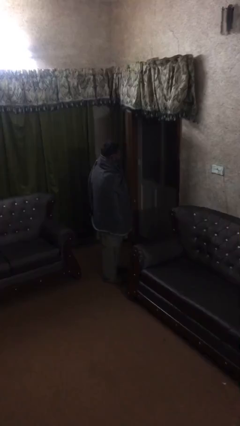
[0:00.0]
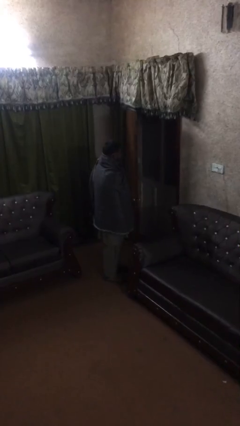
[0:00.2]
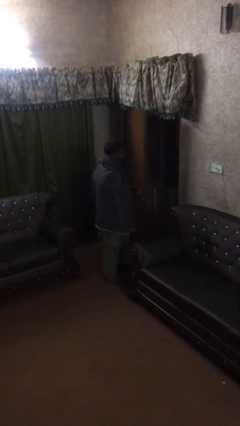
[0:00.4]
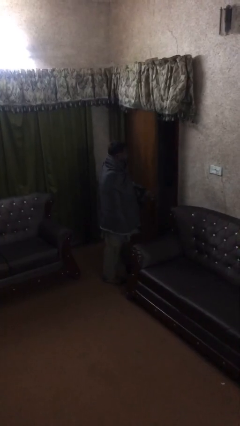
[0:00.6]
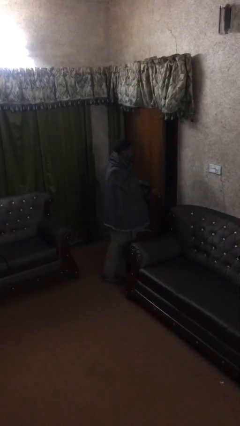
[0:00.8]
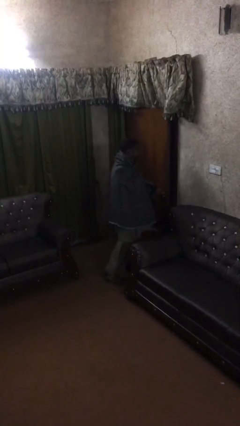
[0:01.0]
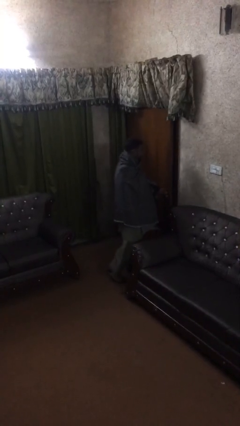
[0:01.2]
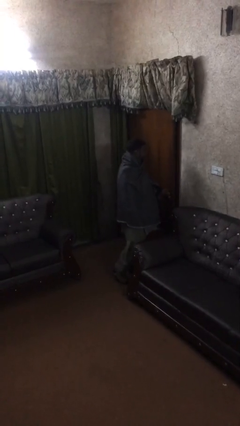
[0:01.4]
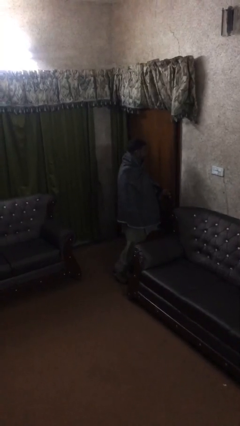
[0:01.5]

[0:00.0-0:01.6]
person closes facility door

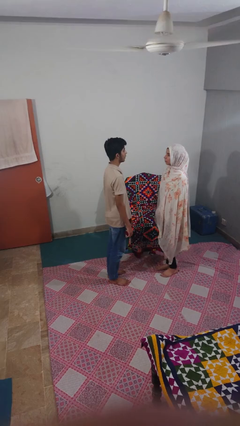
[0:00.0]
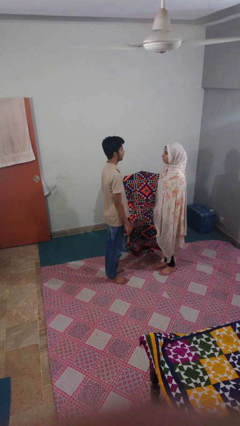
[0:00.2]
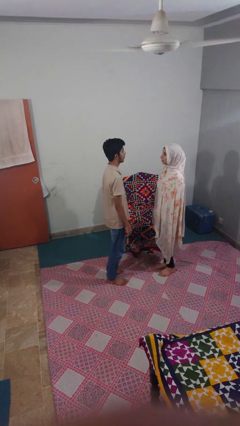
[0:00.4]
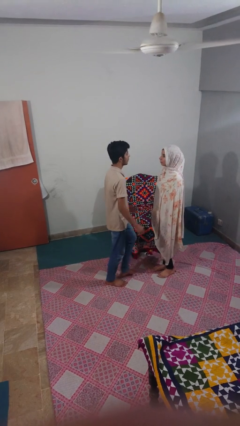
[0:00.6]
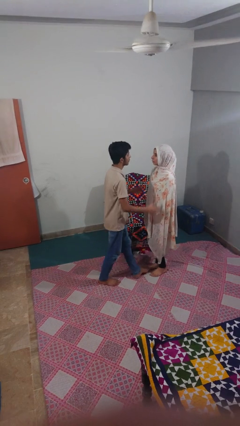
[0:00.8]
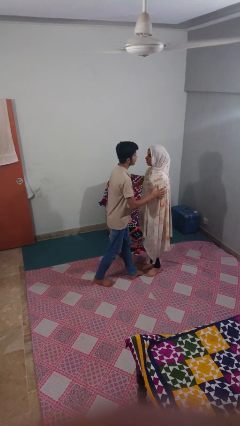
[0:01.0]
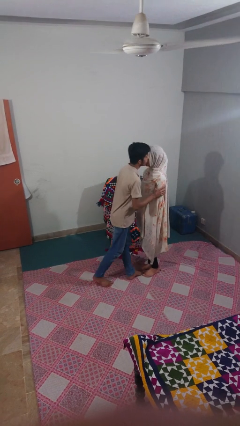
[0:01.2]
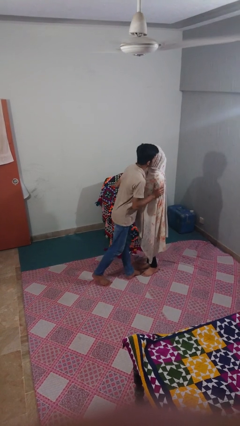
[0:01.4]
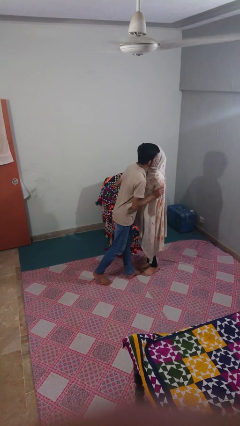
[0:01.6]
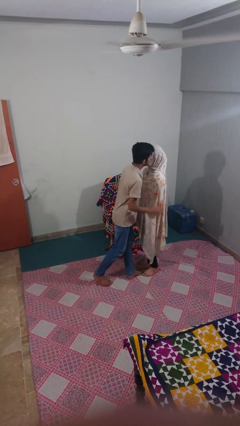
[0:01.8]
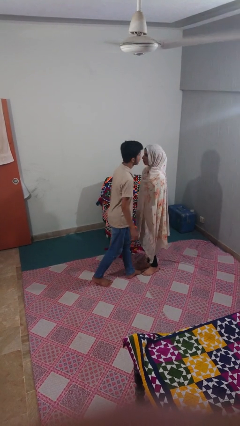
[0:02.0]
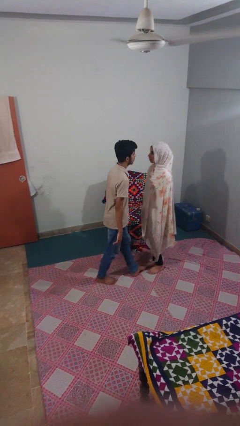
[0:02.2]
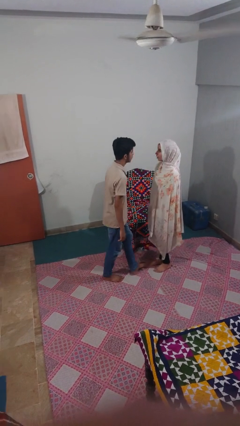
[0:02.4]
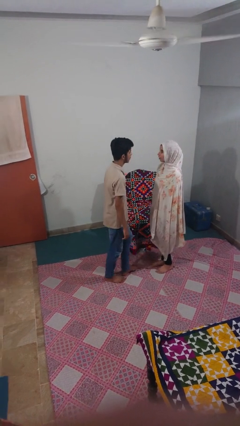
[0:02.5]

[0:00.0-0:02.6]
person kisses cheek of person

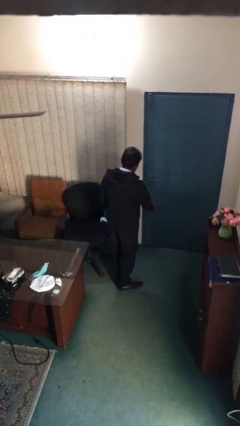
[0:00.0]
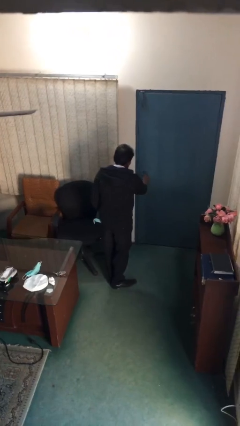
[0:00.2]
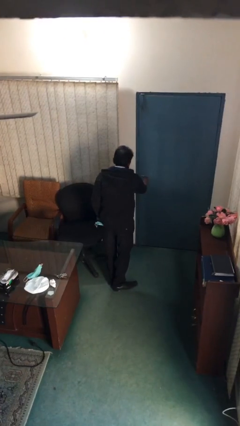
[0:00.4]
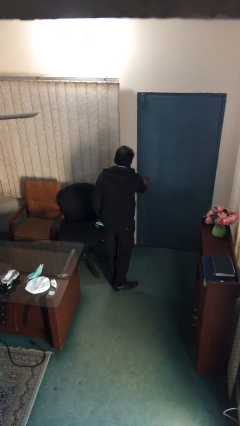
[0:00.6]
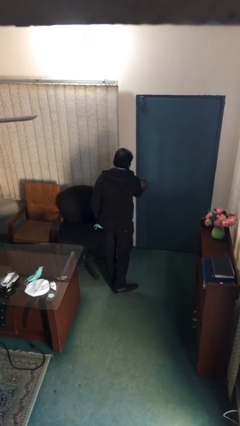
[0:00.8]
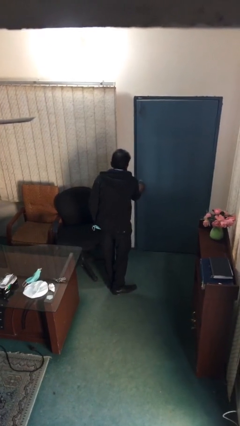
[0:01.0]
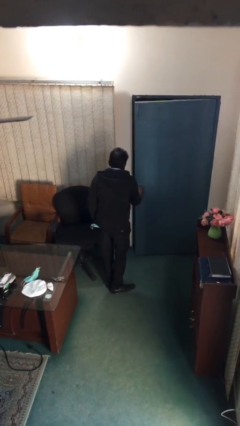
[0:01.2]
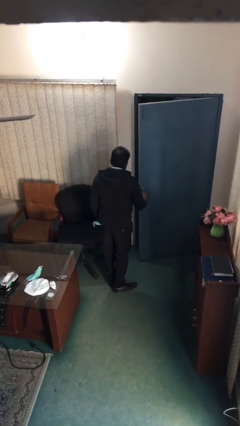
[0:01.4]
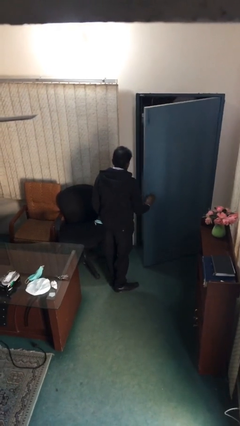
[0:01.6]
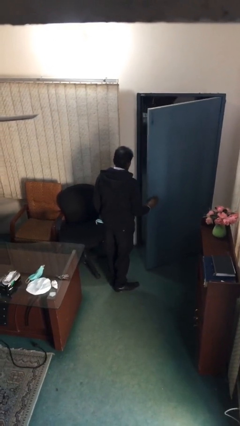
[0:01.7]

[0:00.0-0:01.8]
person opens facility door

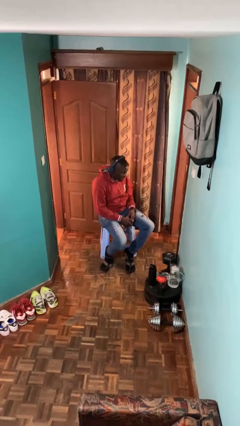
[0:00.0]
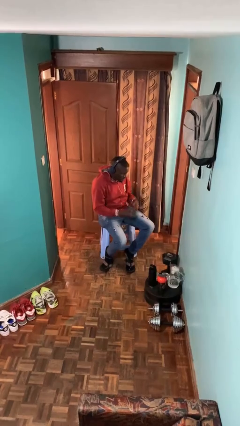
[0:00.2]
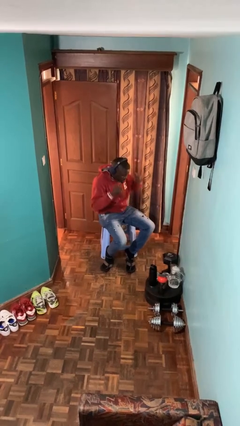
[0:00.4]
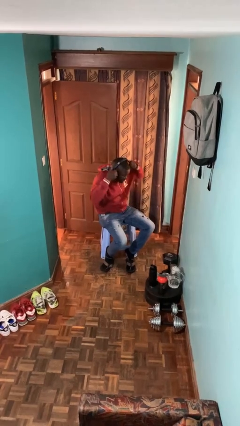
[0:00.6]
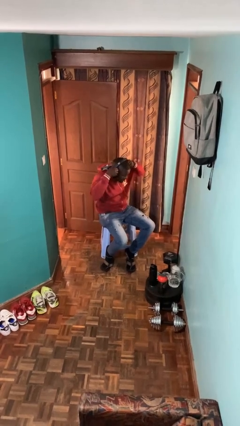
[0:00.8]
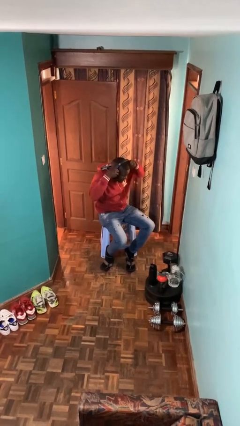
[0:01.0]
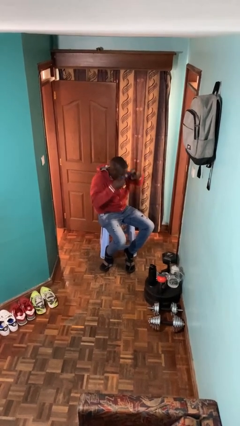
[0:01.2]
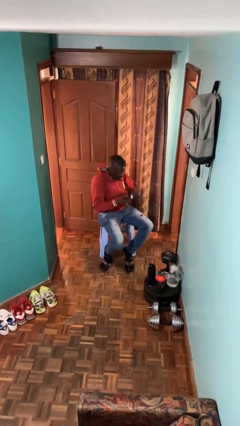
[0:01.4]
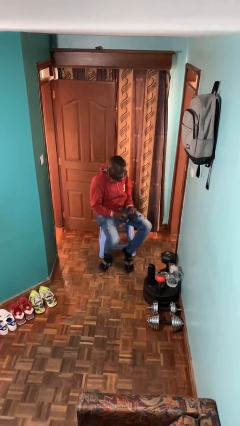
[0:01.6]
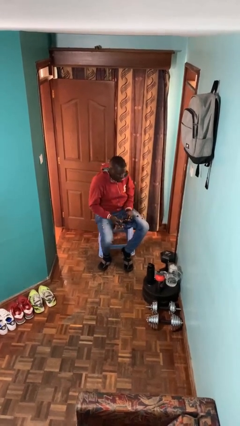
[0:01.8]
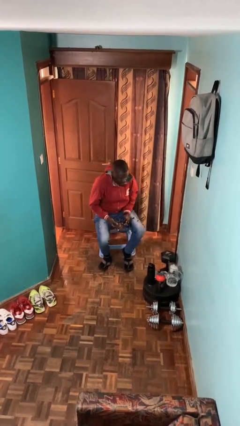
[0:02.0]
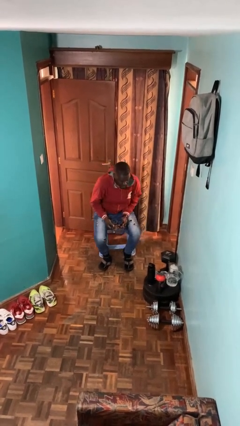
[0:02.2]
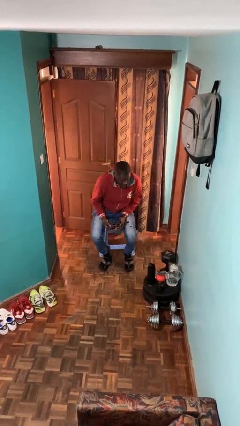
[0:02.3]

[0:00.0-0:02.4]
person takes off headphones

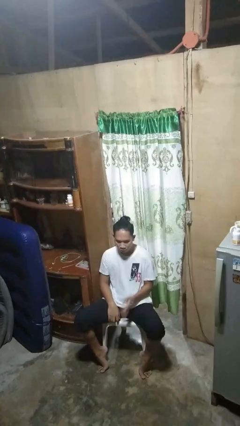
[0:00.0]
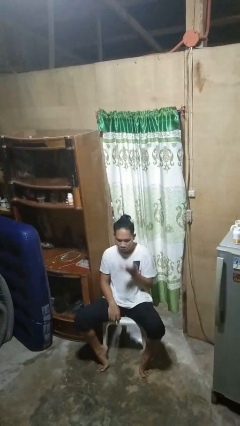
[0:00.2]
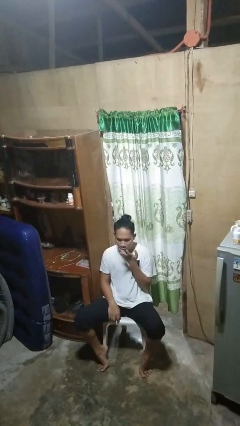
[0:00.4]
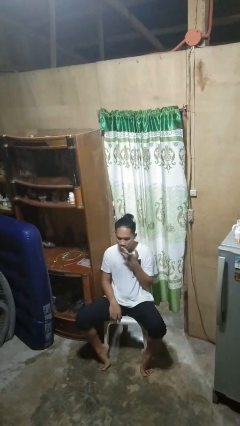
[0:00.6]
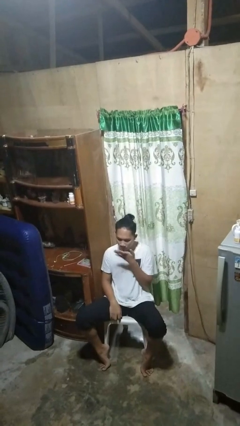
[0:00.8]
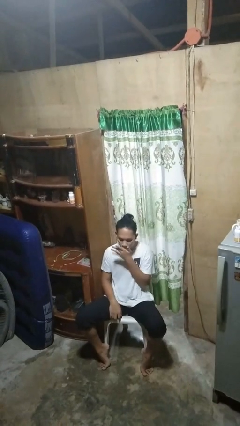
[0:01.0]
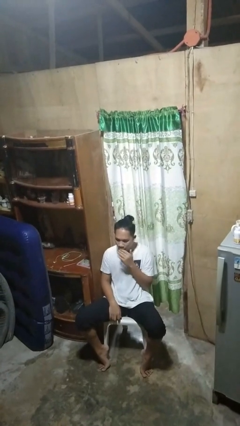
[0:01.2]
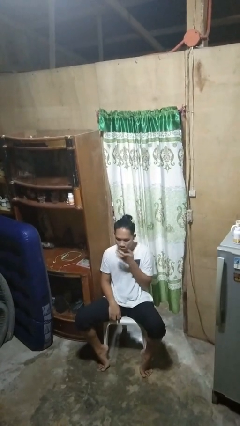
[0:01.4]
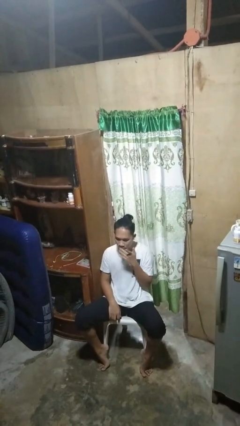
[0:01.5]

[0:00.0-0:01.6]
person licks fingers

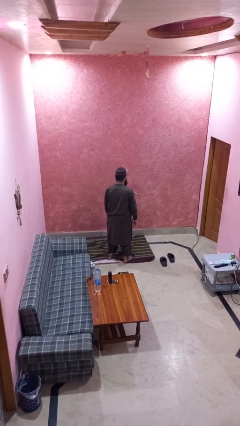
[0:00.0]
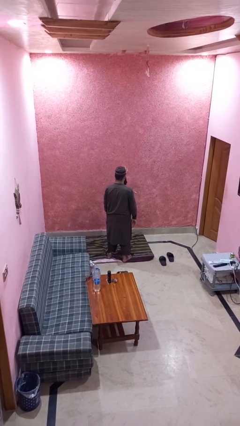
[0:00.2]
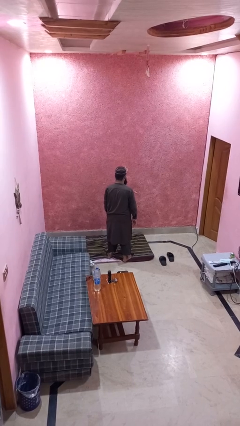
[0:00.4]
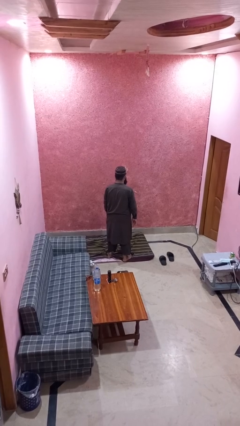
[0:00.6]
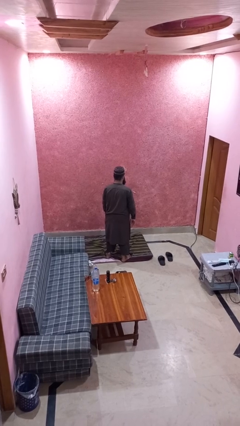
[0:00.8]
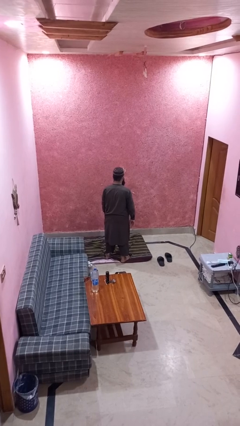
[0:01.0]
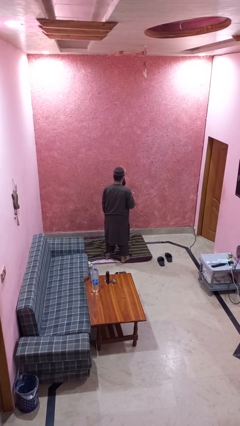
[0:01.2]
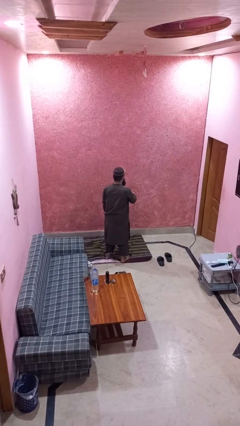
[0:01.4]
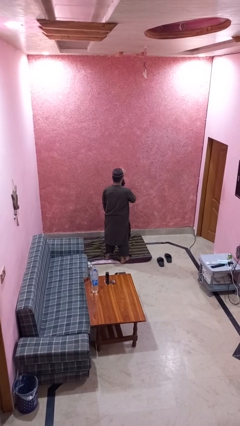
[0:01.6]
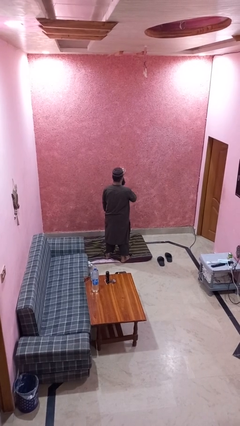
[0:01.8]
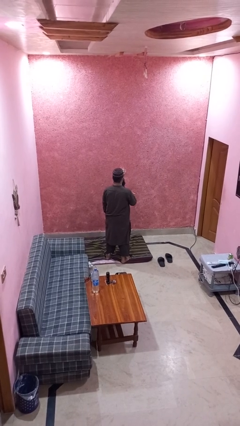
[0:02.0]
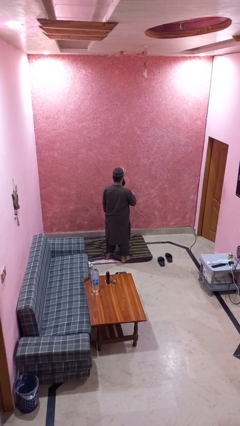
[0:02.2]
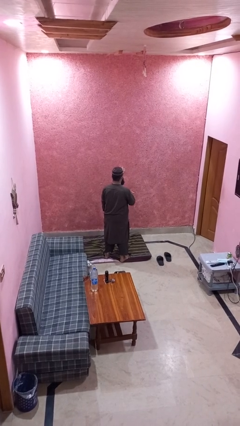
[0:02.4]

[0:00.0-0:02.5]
person drums on chest

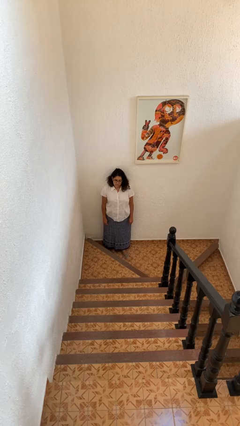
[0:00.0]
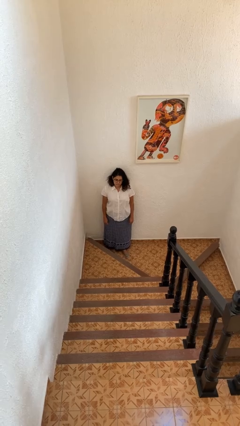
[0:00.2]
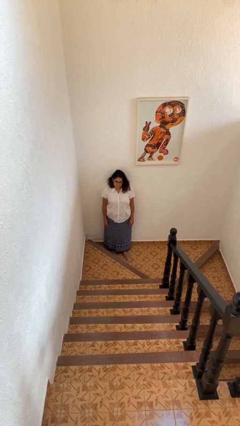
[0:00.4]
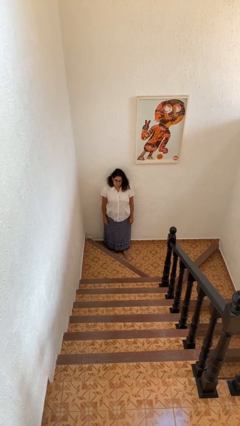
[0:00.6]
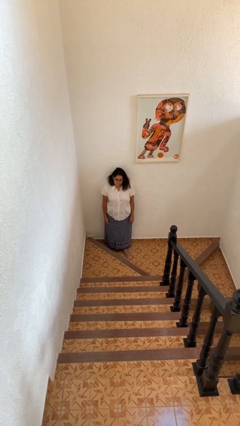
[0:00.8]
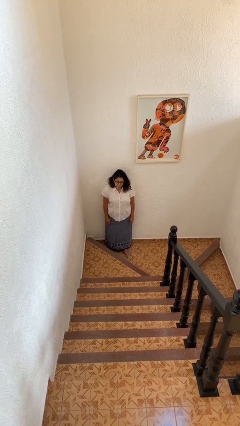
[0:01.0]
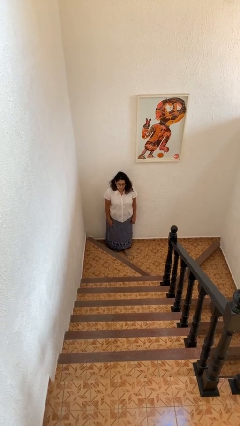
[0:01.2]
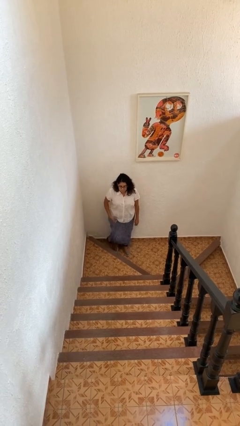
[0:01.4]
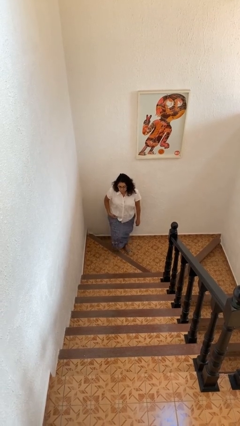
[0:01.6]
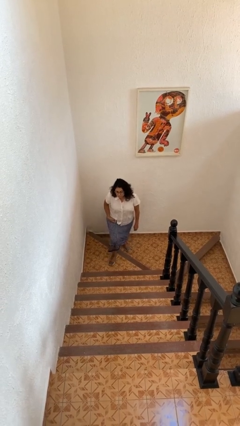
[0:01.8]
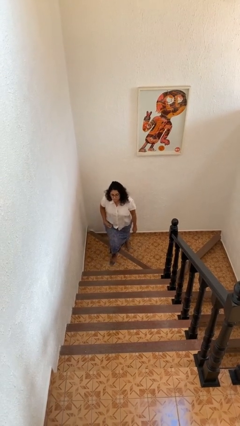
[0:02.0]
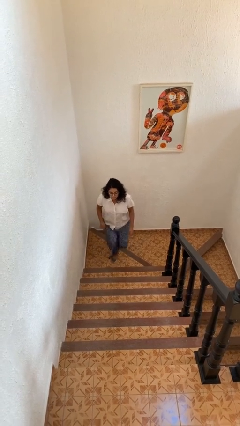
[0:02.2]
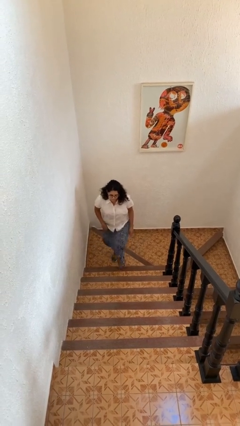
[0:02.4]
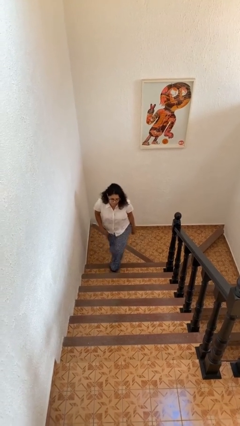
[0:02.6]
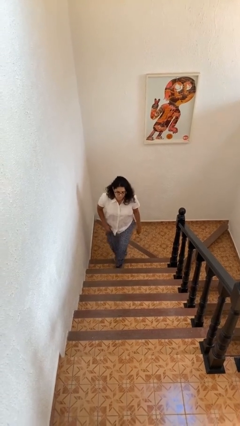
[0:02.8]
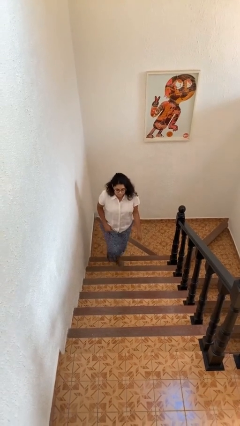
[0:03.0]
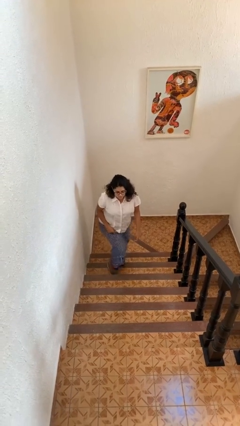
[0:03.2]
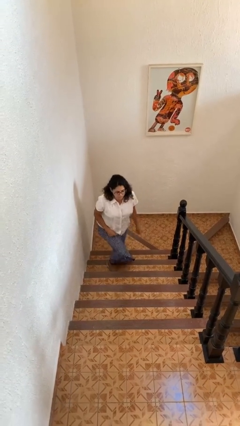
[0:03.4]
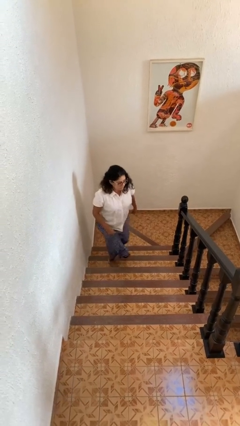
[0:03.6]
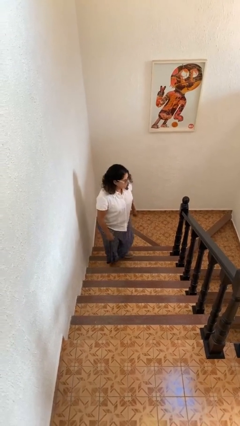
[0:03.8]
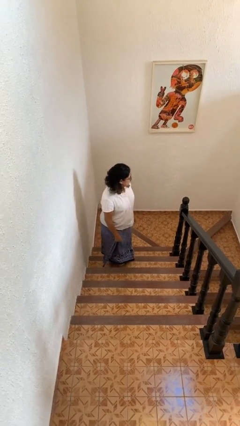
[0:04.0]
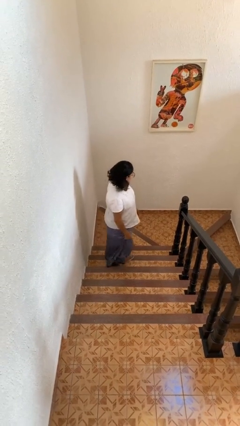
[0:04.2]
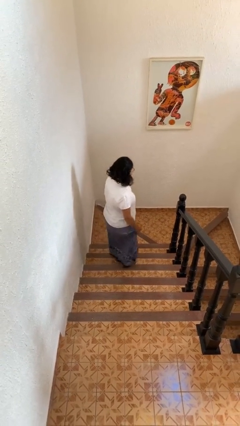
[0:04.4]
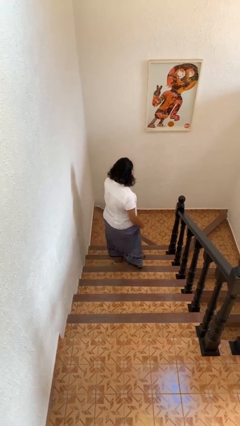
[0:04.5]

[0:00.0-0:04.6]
person climbs up stairs
